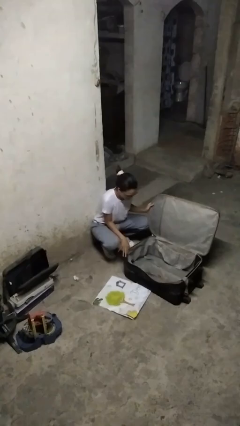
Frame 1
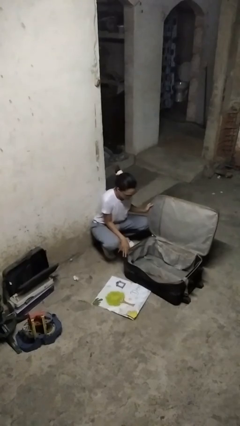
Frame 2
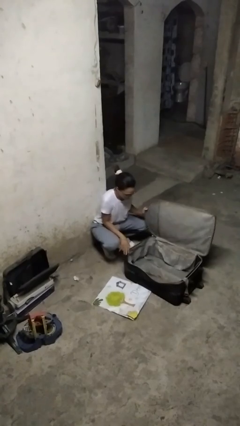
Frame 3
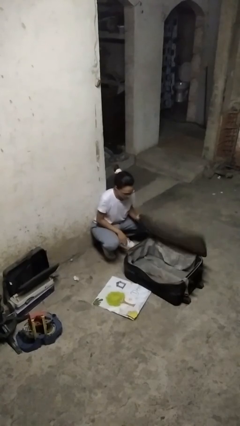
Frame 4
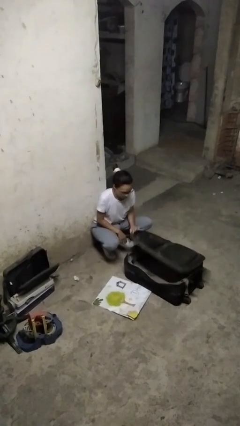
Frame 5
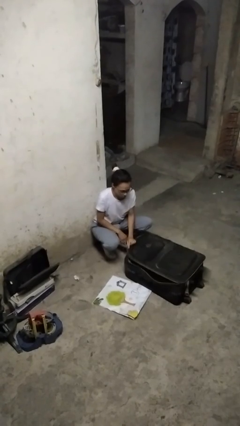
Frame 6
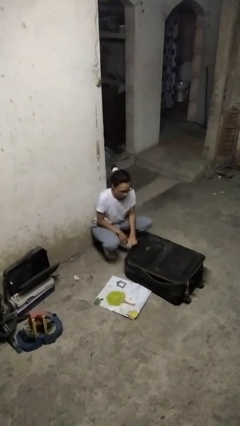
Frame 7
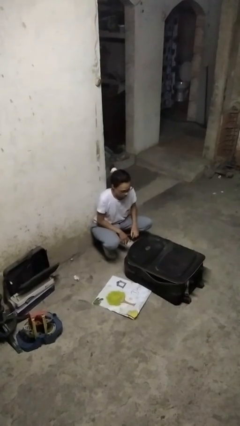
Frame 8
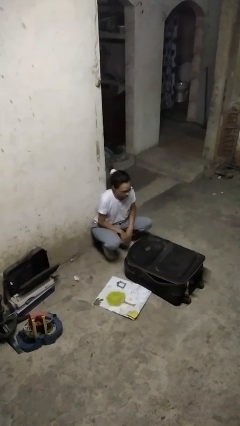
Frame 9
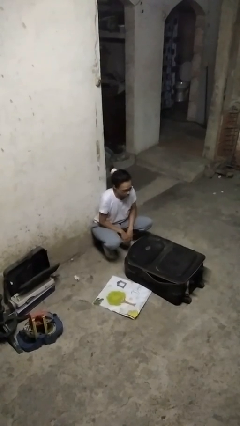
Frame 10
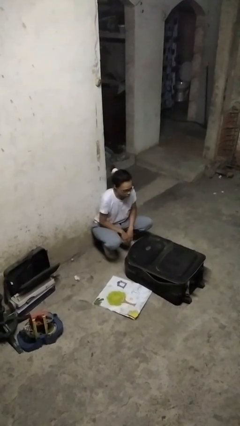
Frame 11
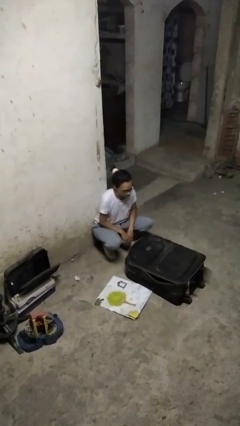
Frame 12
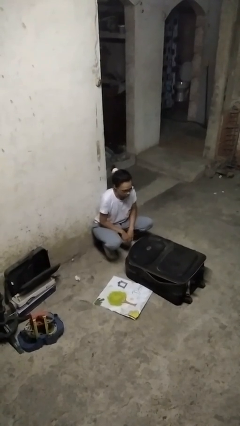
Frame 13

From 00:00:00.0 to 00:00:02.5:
person closes suitcase

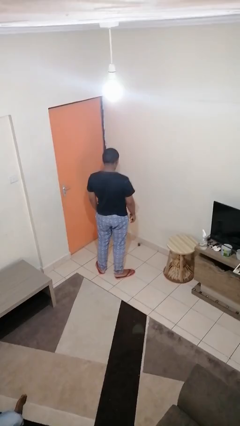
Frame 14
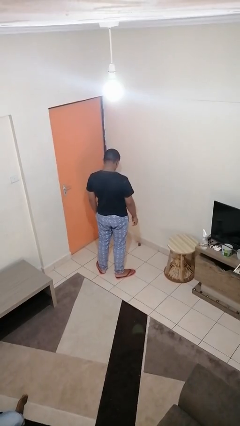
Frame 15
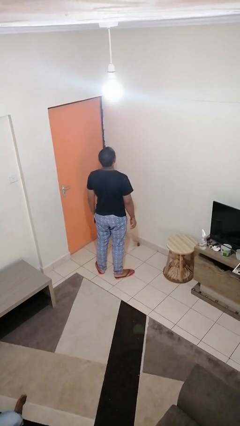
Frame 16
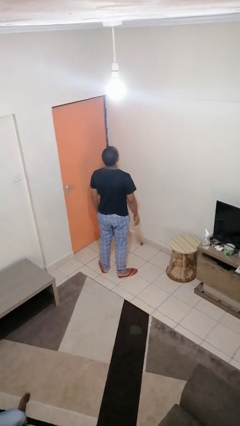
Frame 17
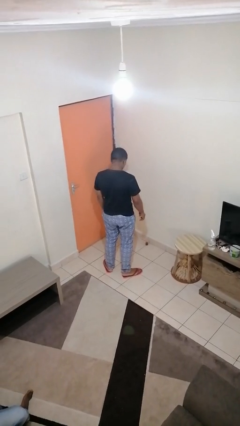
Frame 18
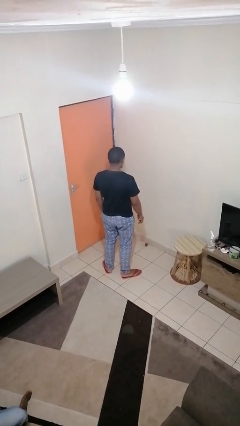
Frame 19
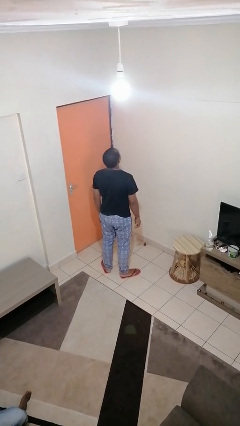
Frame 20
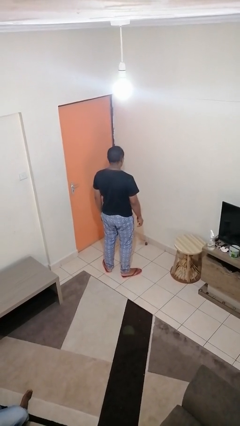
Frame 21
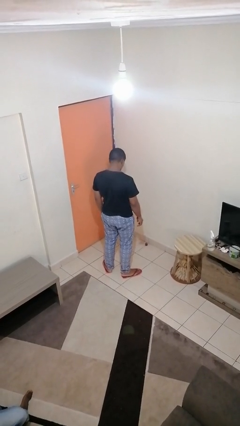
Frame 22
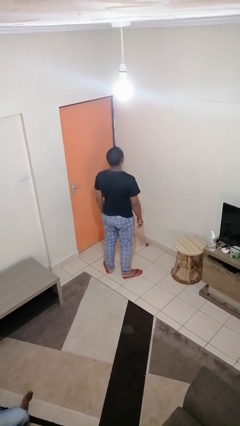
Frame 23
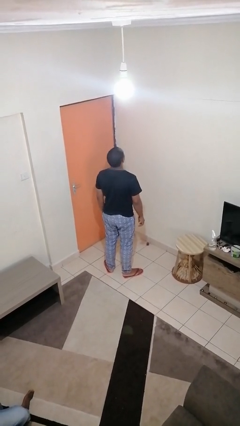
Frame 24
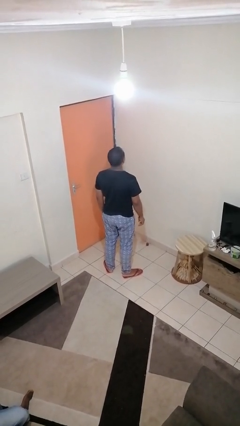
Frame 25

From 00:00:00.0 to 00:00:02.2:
person nods head

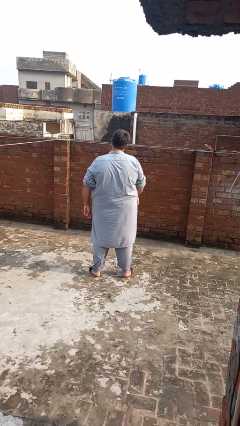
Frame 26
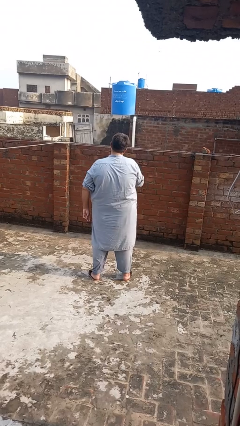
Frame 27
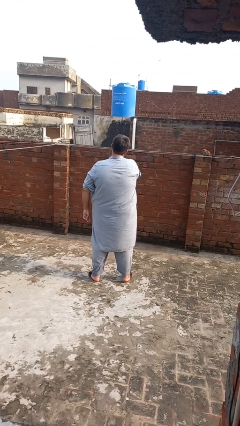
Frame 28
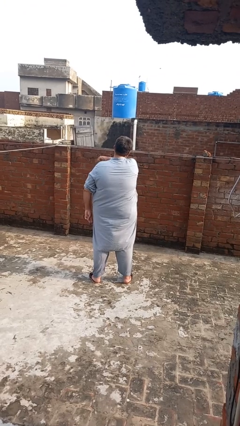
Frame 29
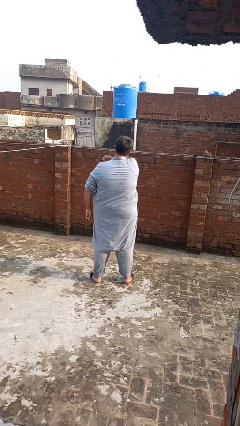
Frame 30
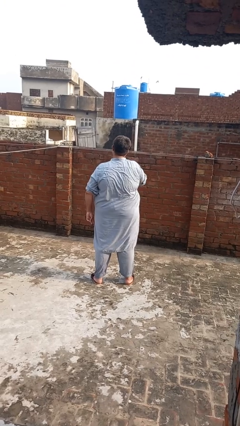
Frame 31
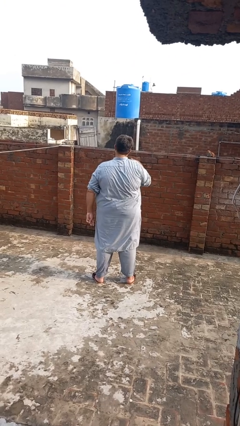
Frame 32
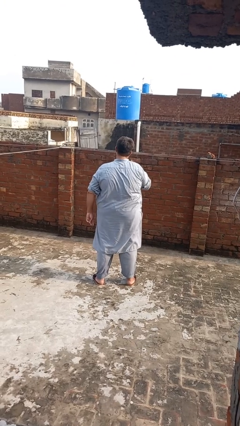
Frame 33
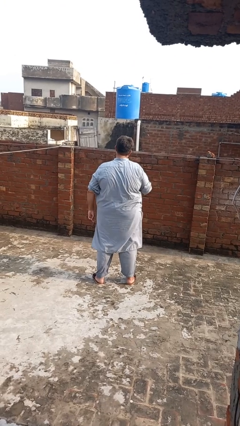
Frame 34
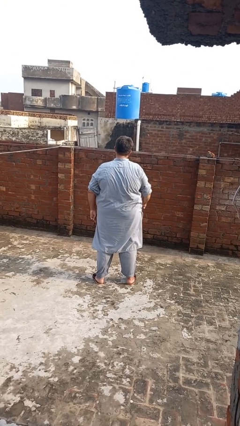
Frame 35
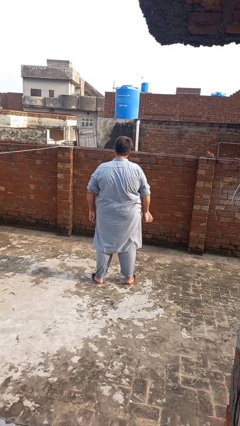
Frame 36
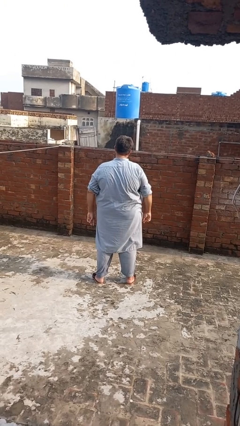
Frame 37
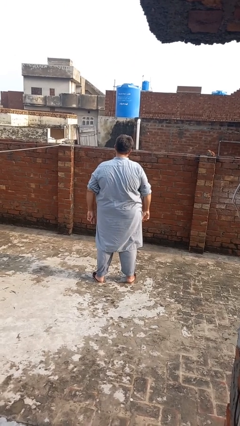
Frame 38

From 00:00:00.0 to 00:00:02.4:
person gestures cut

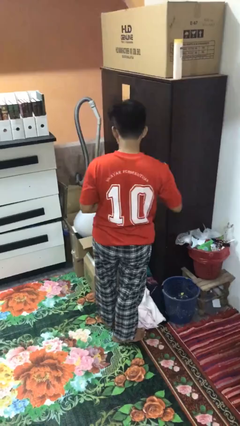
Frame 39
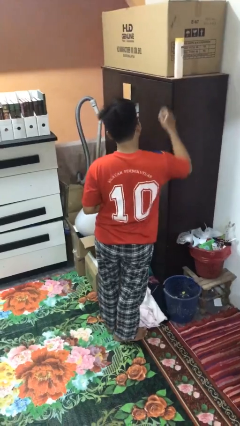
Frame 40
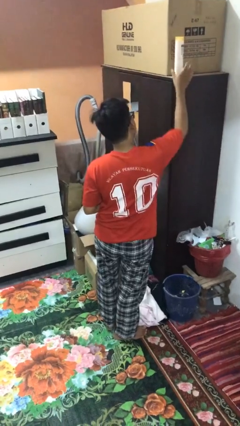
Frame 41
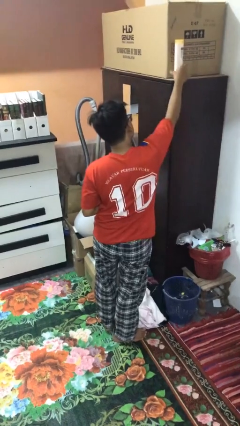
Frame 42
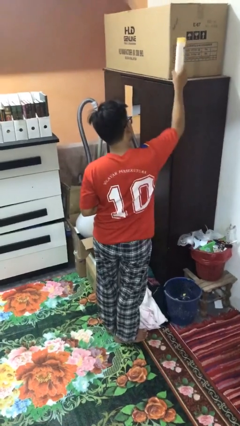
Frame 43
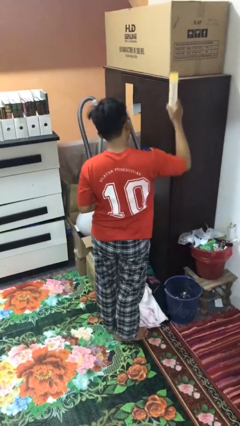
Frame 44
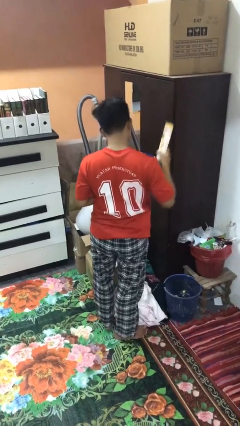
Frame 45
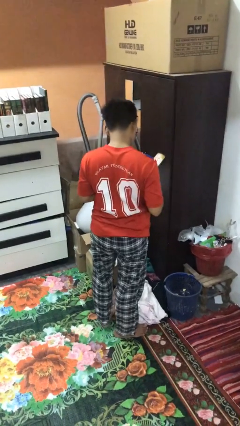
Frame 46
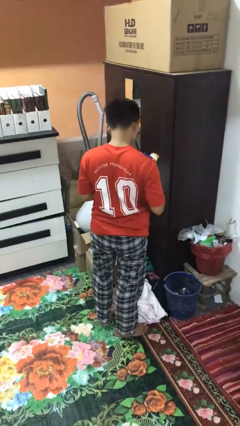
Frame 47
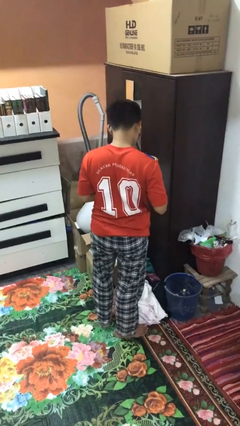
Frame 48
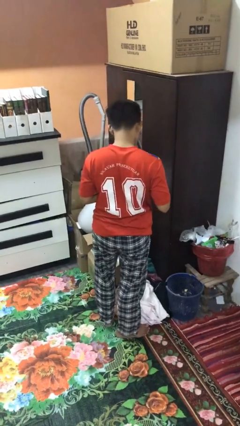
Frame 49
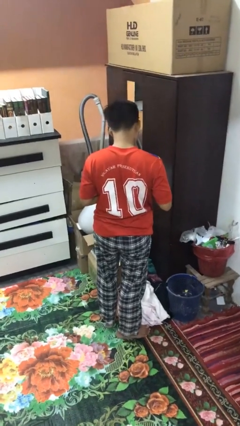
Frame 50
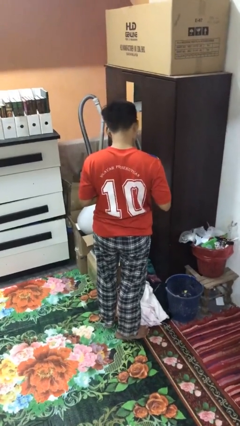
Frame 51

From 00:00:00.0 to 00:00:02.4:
person picks up object from shelf

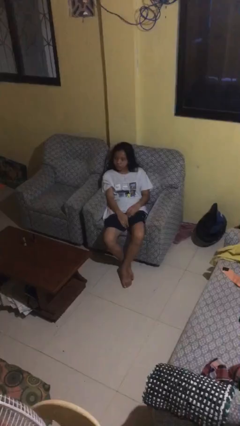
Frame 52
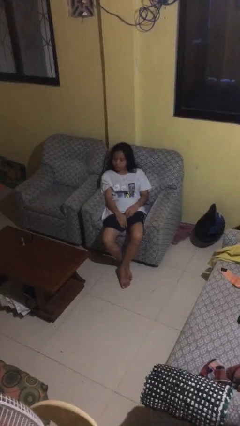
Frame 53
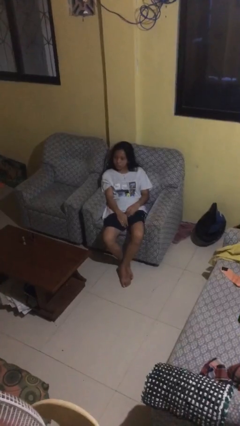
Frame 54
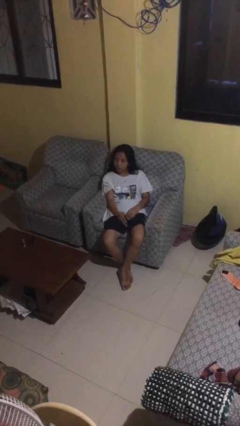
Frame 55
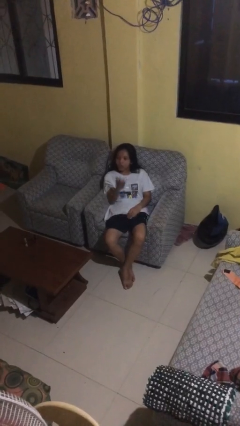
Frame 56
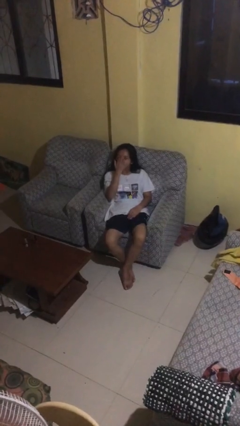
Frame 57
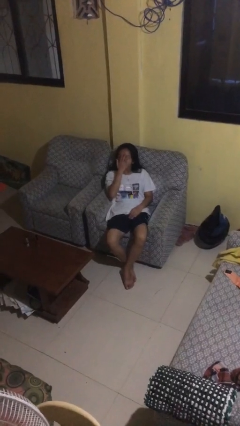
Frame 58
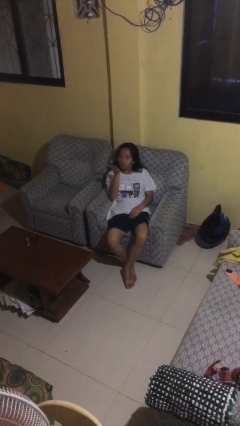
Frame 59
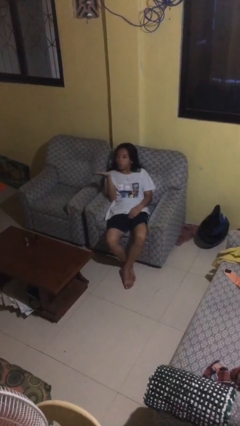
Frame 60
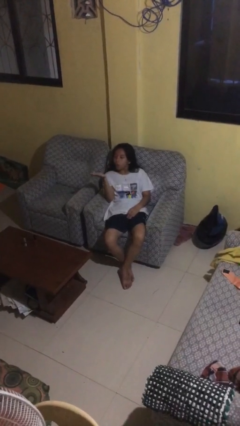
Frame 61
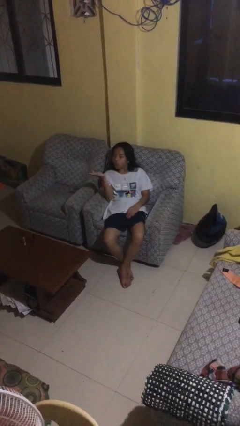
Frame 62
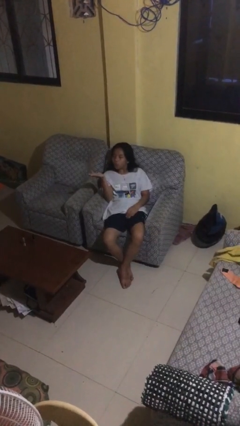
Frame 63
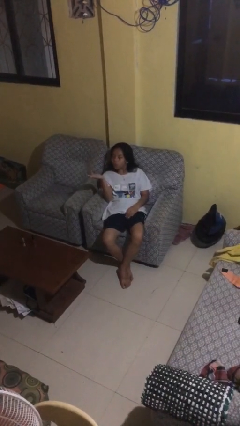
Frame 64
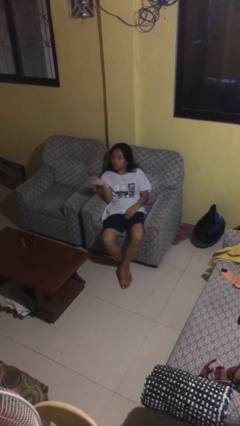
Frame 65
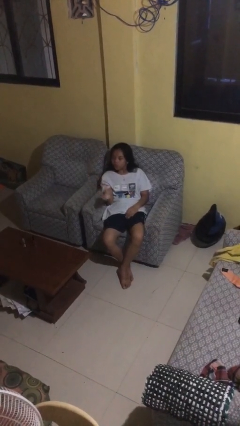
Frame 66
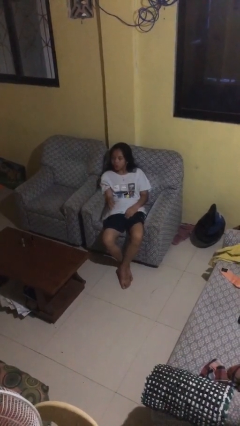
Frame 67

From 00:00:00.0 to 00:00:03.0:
person gestures blow kiss

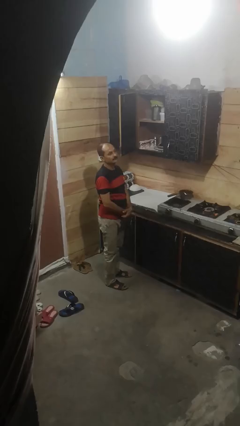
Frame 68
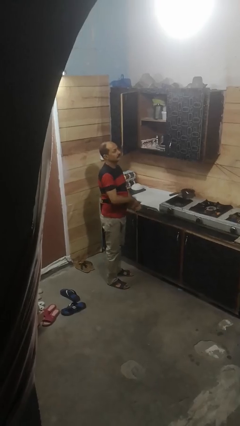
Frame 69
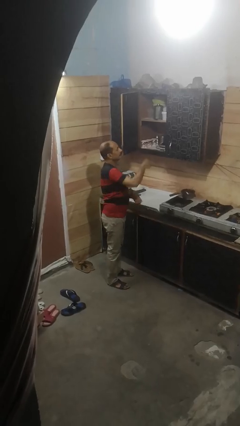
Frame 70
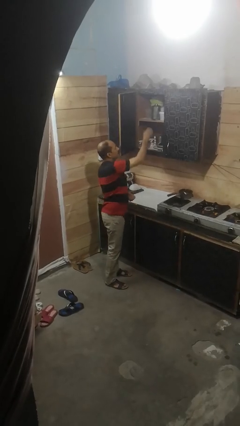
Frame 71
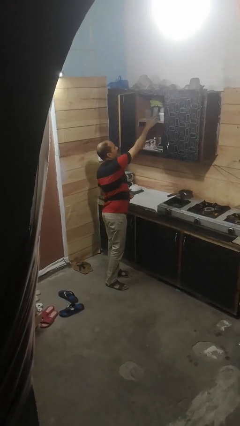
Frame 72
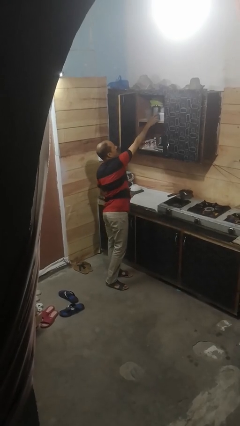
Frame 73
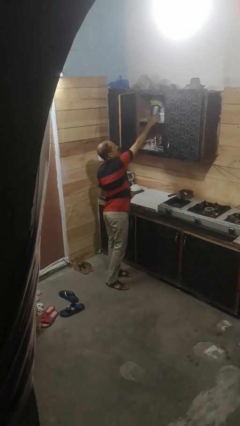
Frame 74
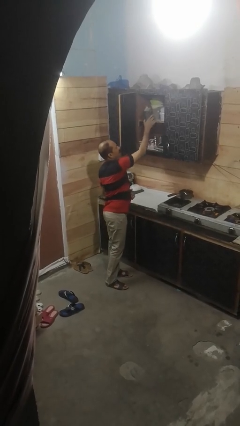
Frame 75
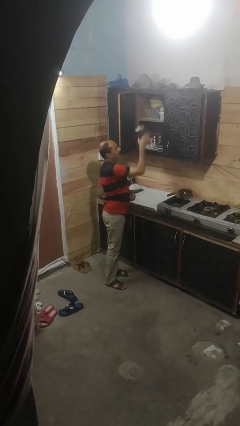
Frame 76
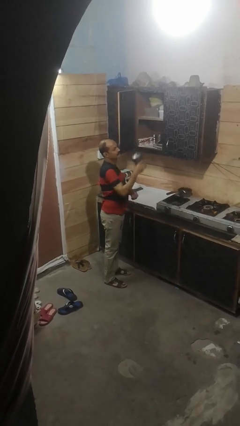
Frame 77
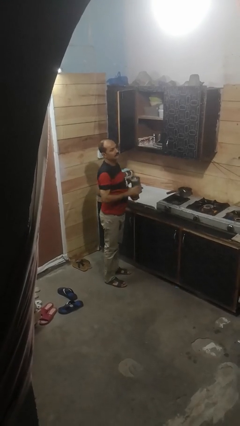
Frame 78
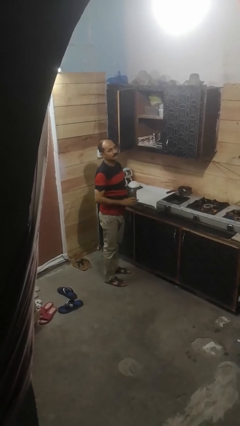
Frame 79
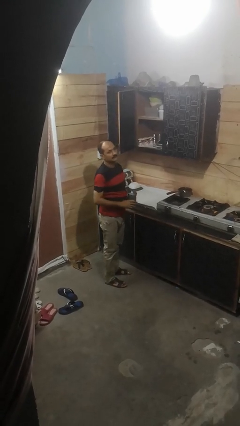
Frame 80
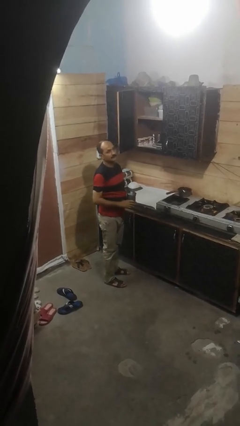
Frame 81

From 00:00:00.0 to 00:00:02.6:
person picks up object from cabinet

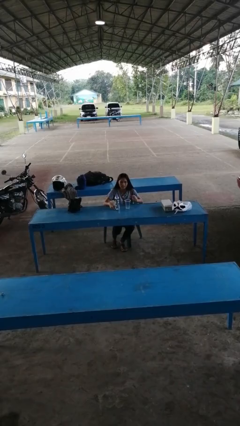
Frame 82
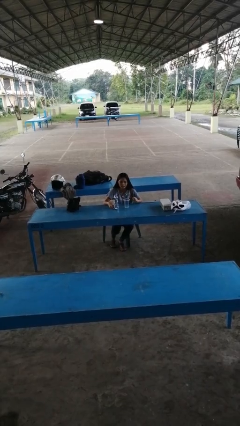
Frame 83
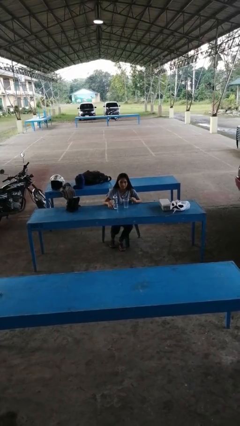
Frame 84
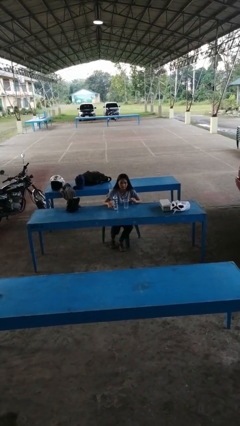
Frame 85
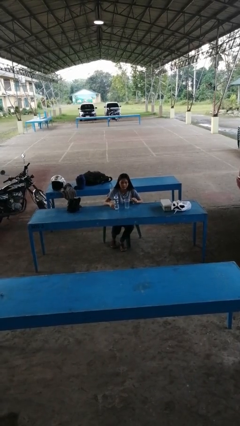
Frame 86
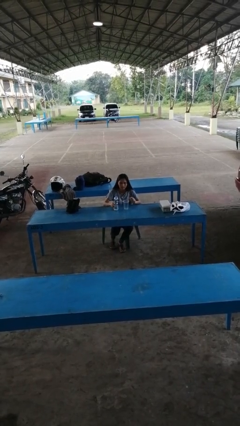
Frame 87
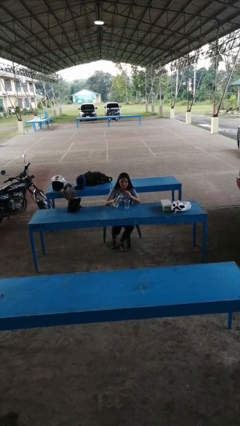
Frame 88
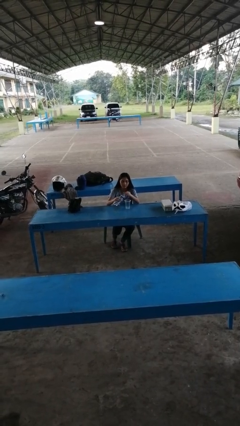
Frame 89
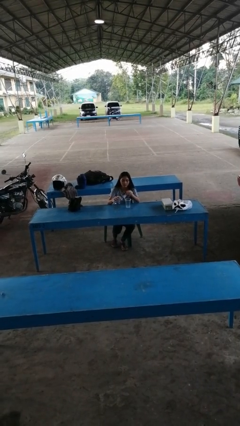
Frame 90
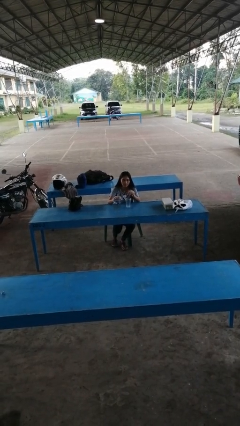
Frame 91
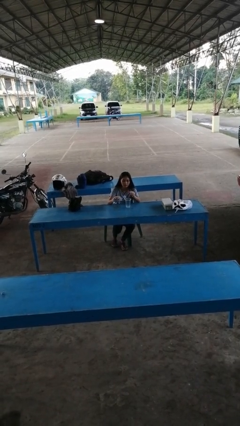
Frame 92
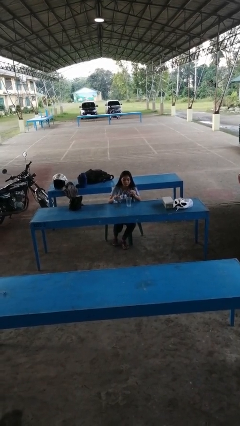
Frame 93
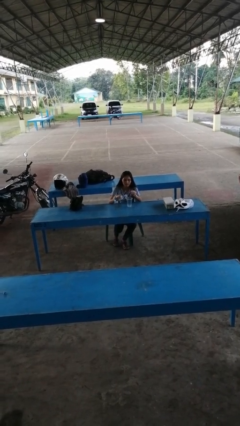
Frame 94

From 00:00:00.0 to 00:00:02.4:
person pours liquid into cup
